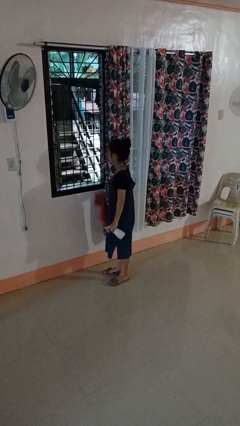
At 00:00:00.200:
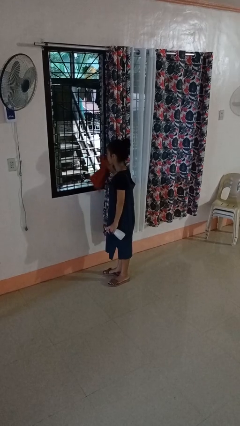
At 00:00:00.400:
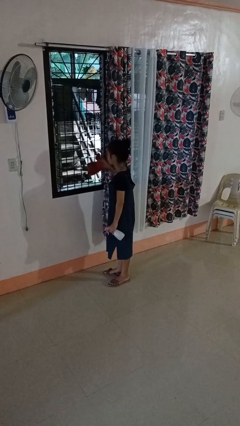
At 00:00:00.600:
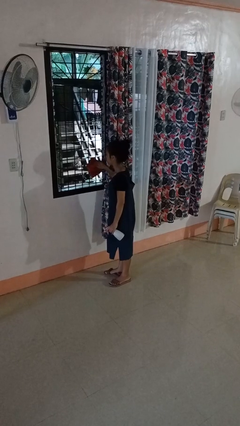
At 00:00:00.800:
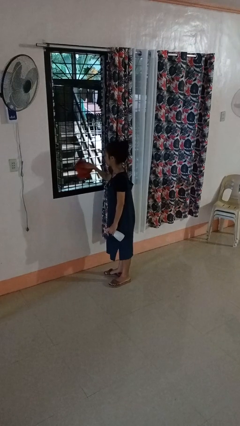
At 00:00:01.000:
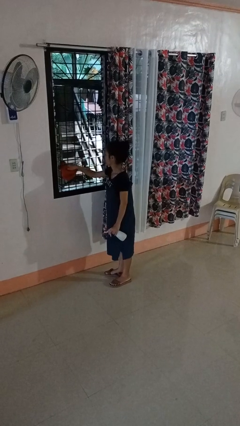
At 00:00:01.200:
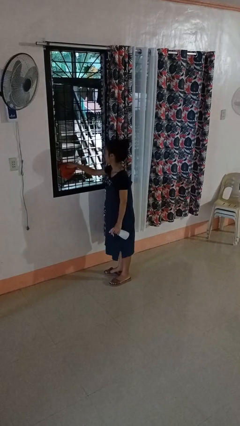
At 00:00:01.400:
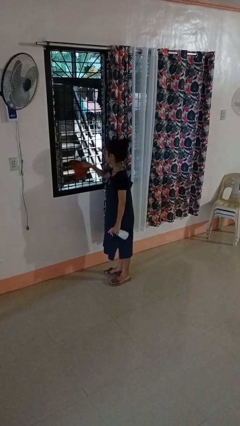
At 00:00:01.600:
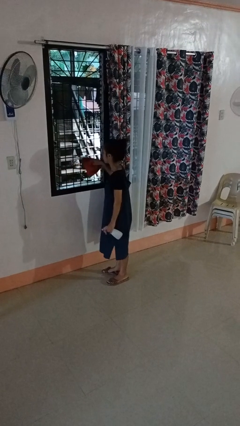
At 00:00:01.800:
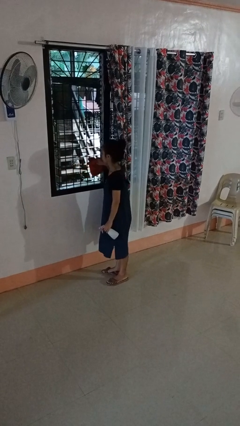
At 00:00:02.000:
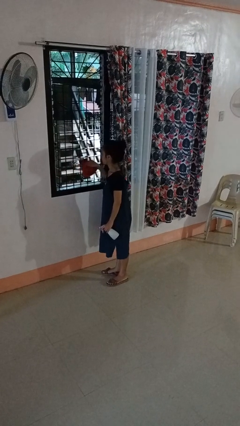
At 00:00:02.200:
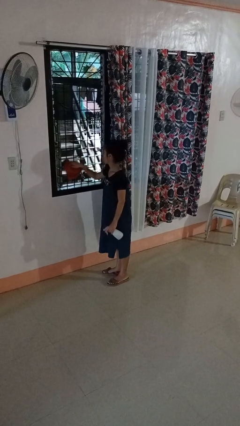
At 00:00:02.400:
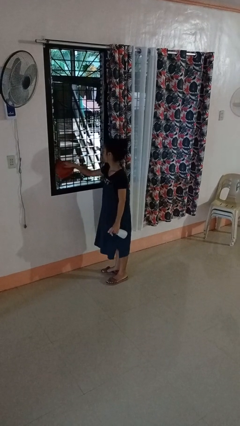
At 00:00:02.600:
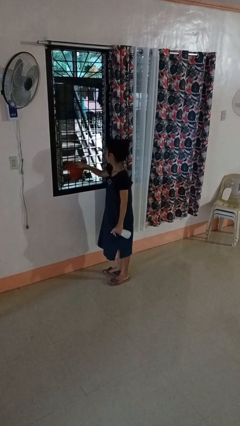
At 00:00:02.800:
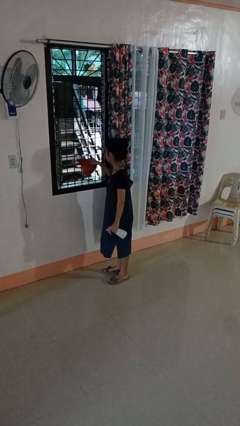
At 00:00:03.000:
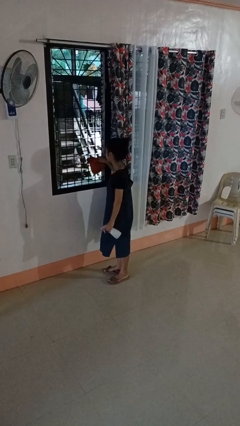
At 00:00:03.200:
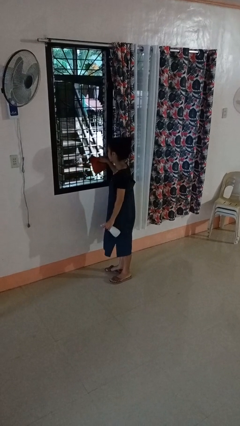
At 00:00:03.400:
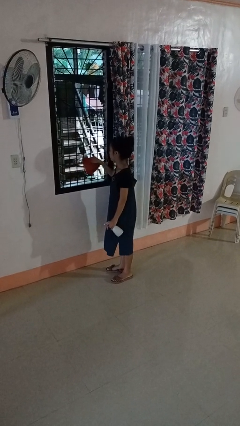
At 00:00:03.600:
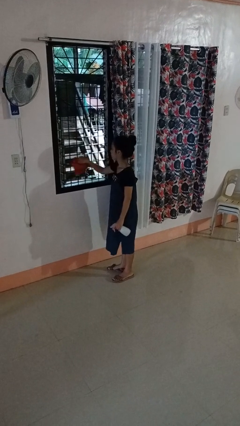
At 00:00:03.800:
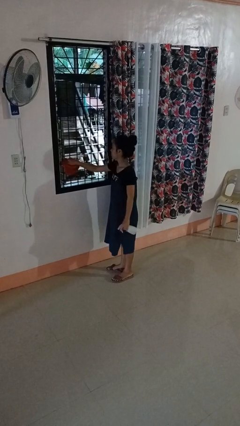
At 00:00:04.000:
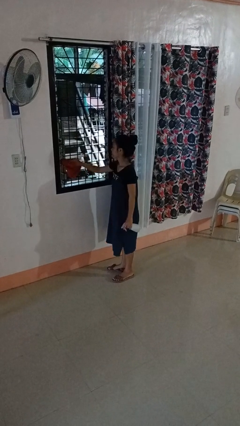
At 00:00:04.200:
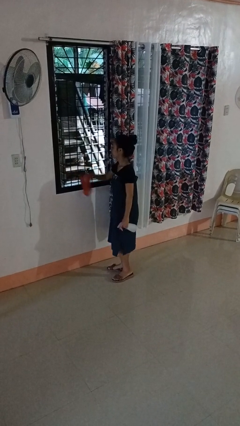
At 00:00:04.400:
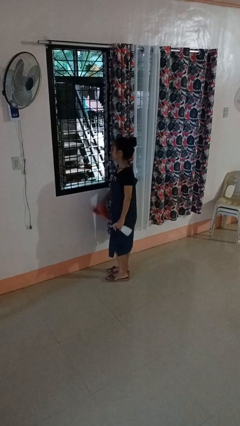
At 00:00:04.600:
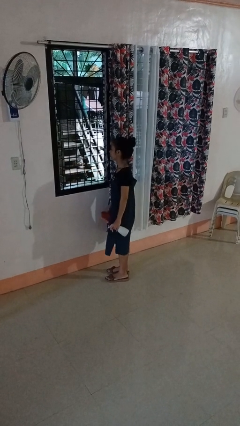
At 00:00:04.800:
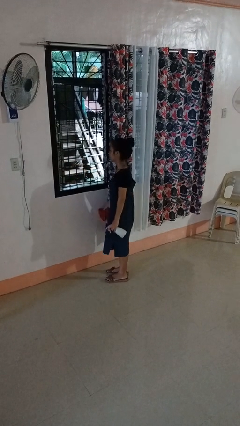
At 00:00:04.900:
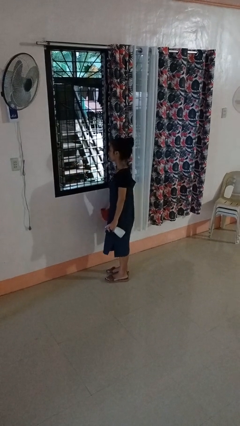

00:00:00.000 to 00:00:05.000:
person washes window

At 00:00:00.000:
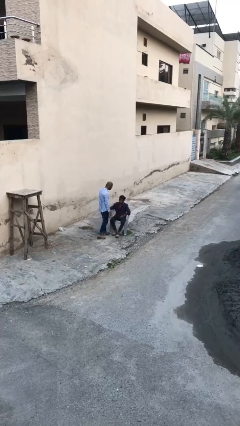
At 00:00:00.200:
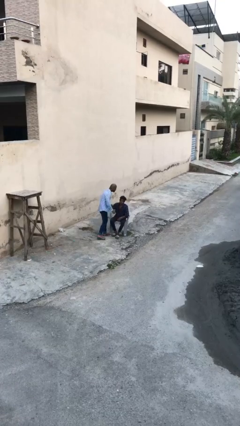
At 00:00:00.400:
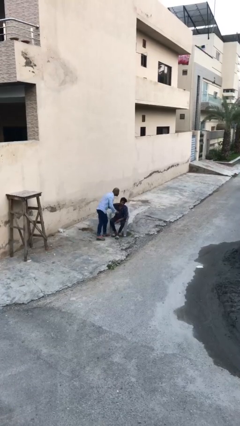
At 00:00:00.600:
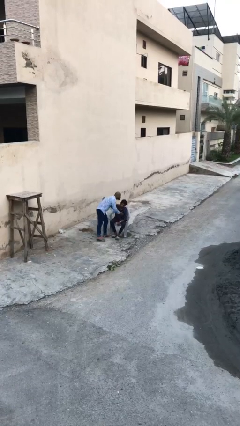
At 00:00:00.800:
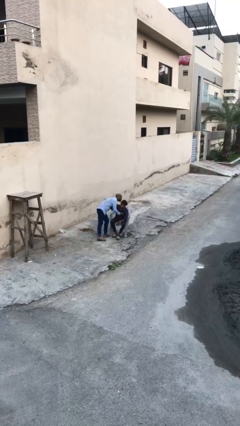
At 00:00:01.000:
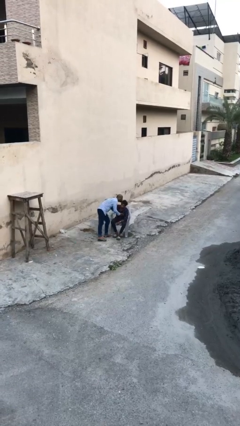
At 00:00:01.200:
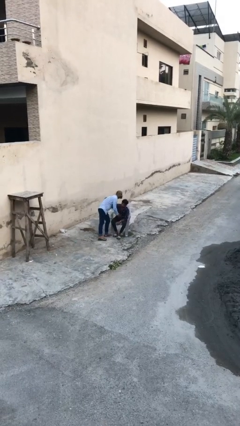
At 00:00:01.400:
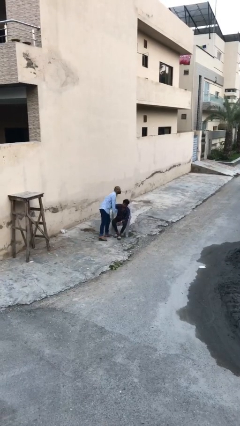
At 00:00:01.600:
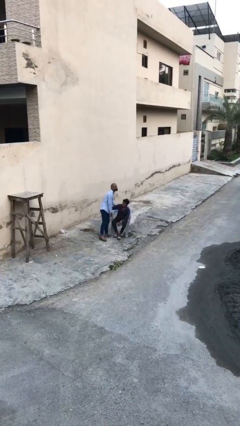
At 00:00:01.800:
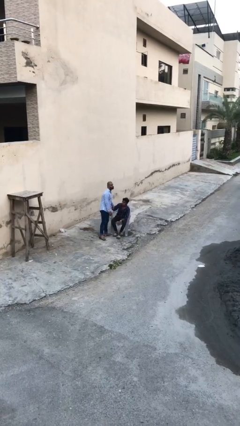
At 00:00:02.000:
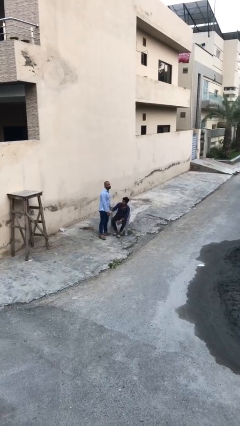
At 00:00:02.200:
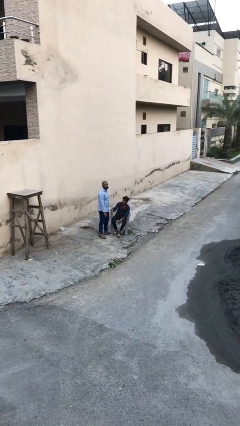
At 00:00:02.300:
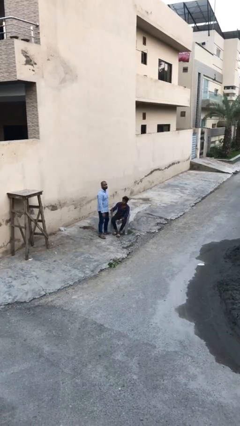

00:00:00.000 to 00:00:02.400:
person embraces person

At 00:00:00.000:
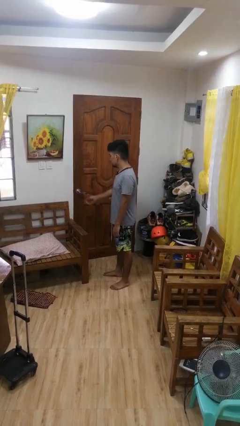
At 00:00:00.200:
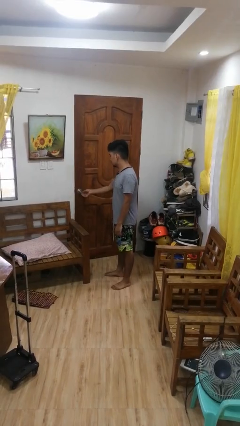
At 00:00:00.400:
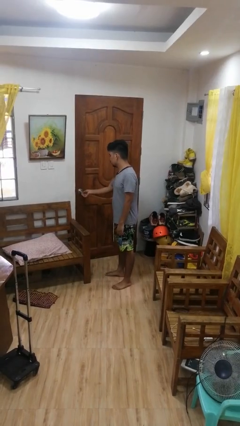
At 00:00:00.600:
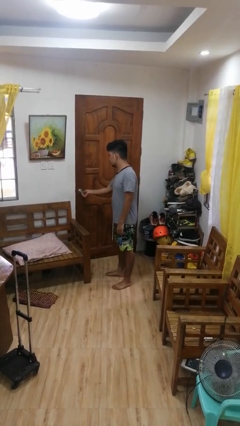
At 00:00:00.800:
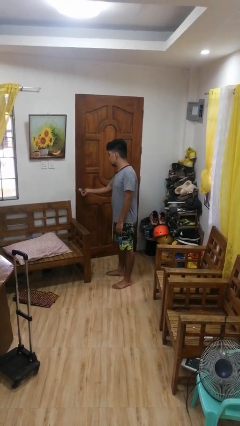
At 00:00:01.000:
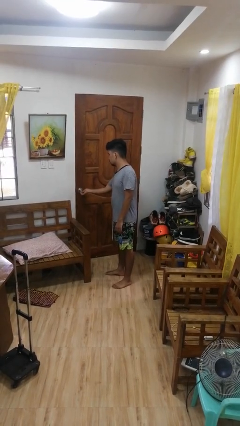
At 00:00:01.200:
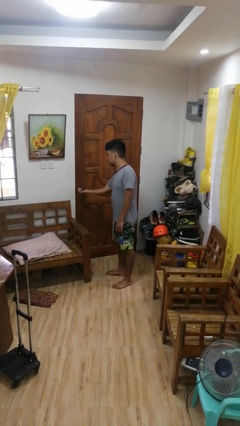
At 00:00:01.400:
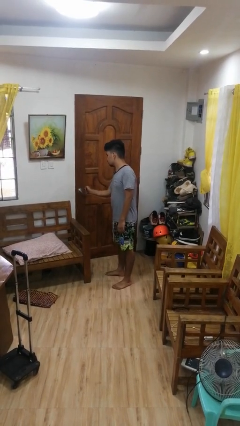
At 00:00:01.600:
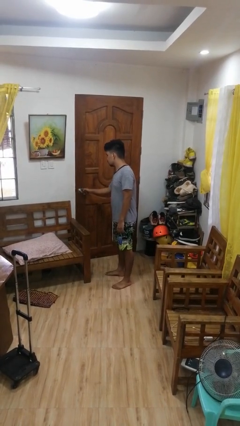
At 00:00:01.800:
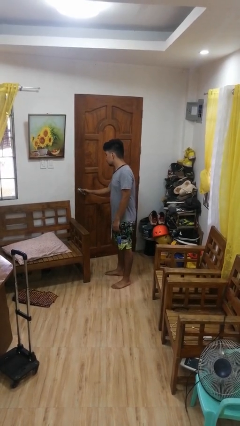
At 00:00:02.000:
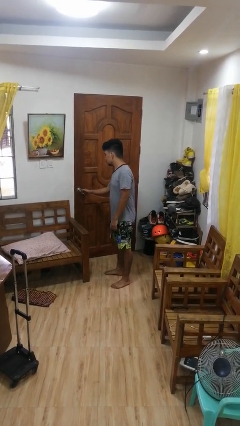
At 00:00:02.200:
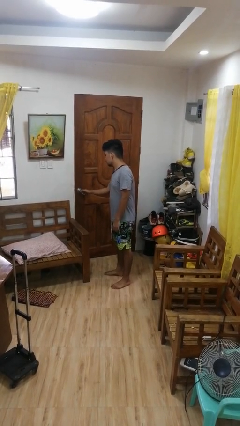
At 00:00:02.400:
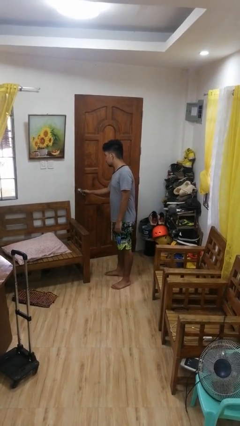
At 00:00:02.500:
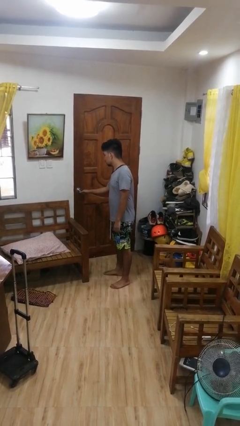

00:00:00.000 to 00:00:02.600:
person unlocks door with keys

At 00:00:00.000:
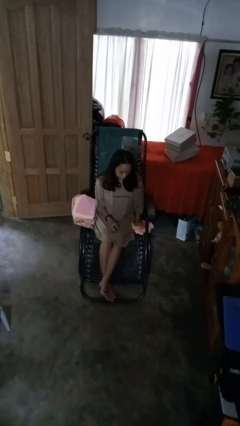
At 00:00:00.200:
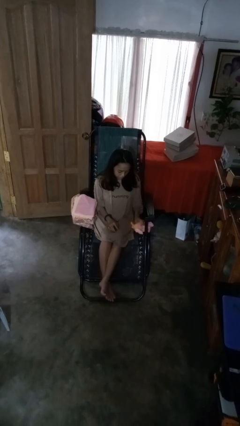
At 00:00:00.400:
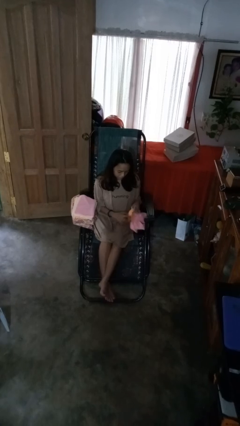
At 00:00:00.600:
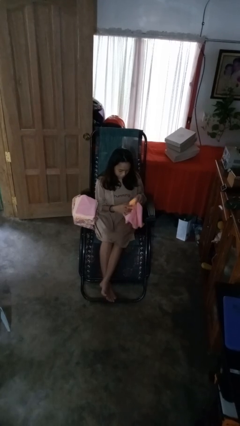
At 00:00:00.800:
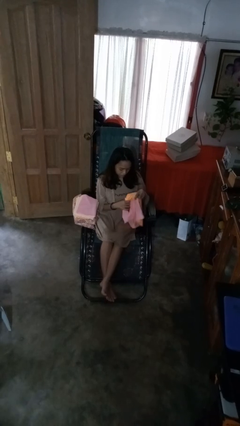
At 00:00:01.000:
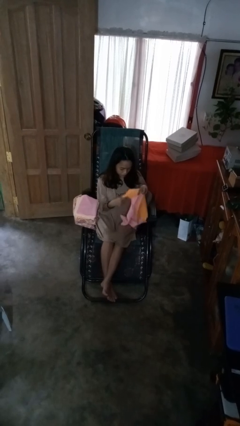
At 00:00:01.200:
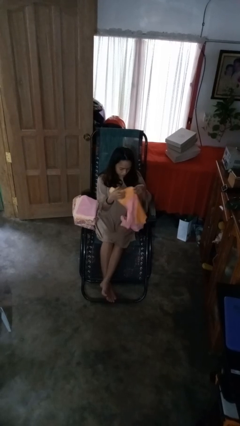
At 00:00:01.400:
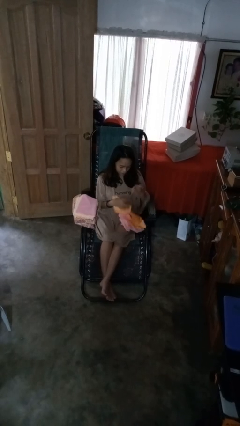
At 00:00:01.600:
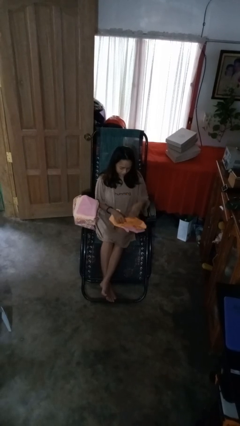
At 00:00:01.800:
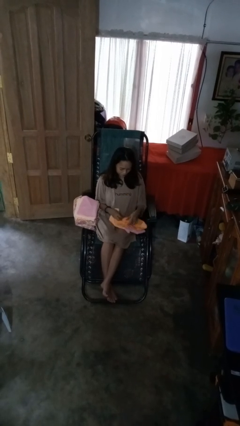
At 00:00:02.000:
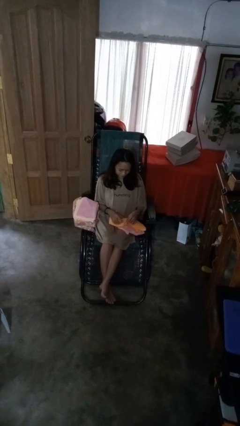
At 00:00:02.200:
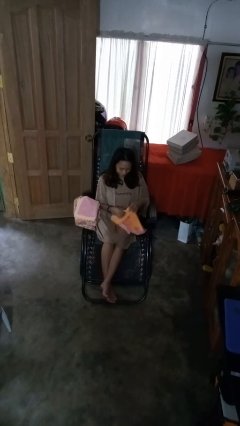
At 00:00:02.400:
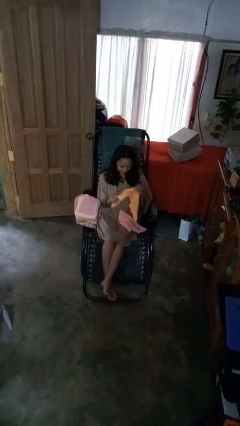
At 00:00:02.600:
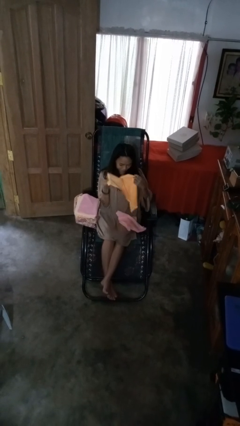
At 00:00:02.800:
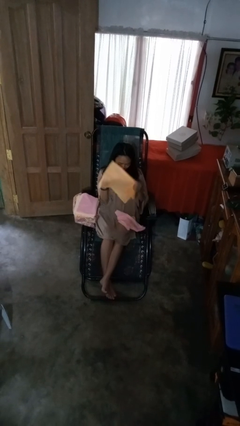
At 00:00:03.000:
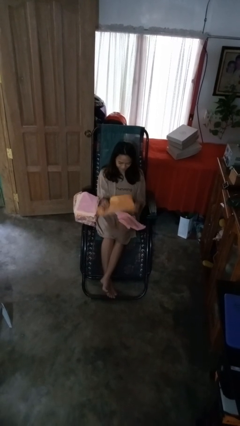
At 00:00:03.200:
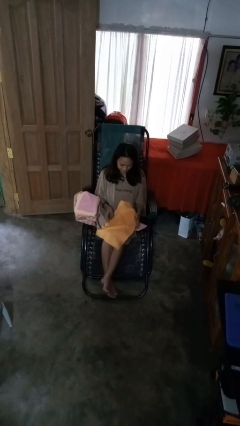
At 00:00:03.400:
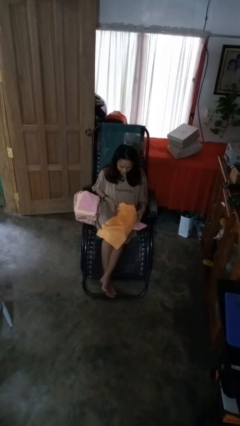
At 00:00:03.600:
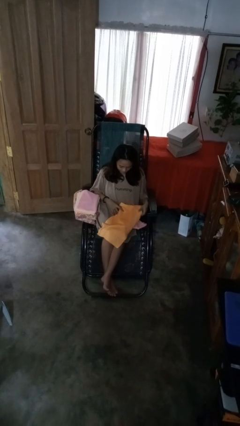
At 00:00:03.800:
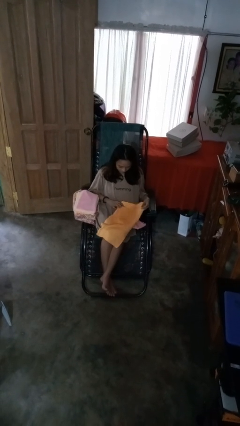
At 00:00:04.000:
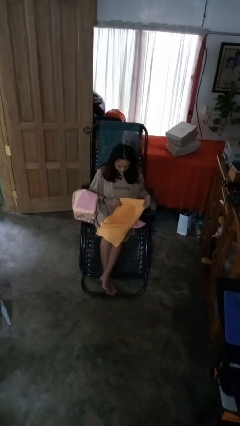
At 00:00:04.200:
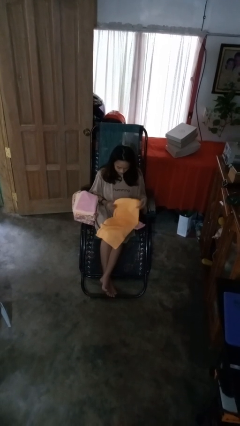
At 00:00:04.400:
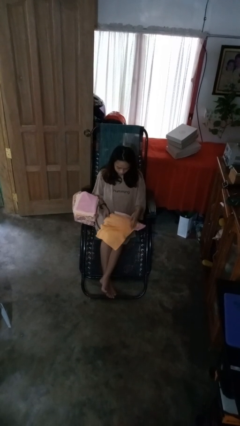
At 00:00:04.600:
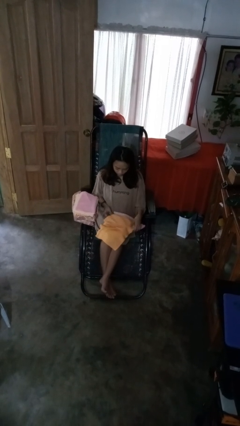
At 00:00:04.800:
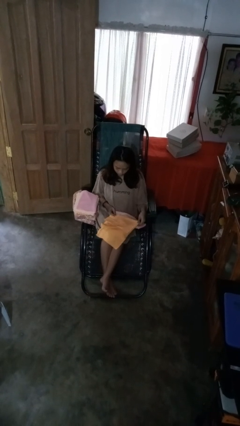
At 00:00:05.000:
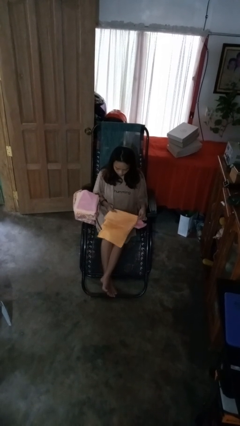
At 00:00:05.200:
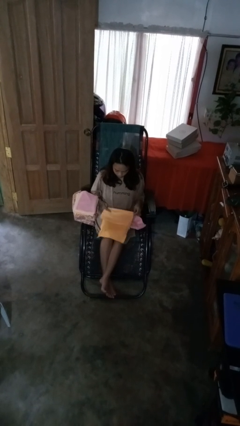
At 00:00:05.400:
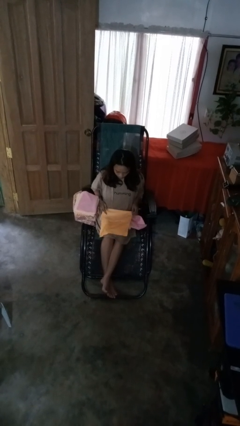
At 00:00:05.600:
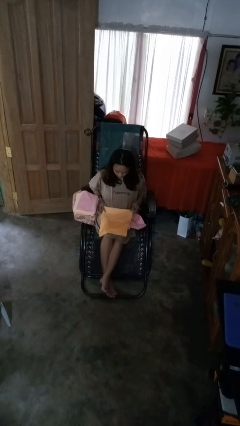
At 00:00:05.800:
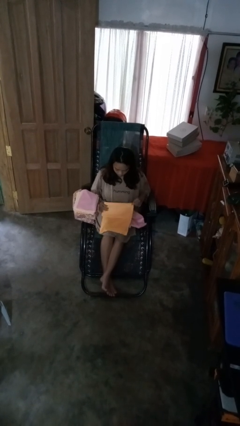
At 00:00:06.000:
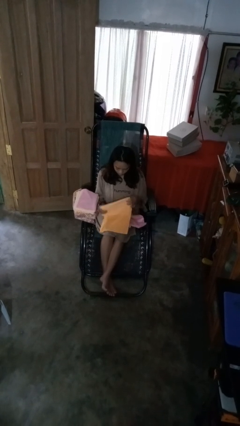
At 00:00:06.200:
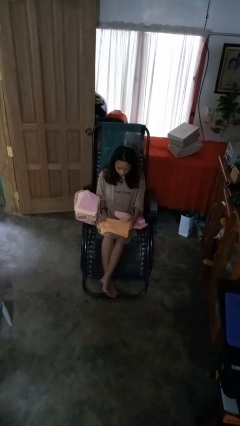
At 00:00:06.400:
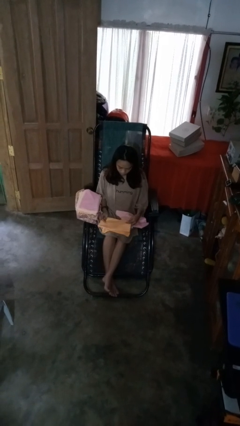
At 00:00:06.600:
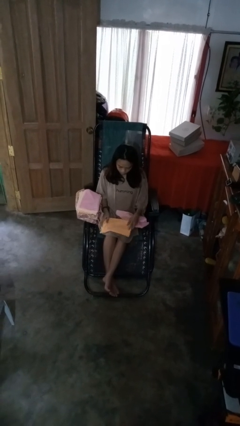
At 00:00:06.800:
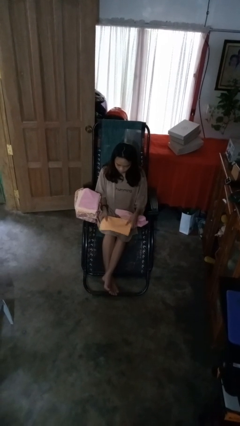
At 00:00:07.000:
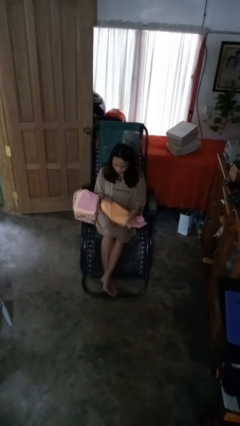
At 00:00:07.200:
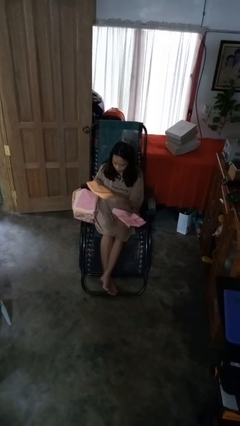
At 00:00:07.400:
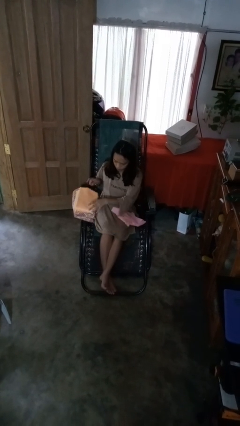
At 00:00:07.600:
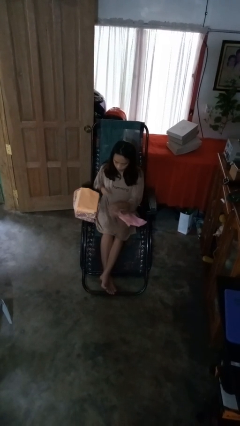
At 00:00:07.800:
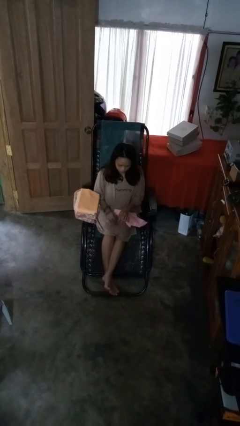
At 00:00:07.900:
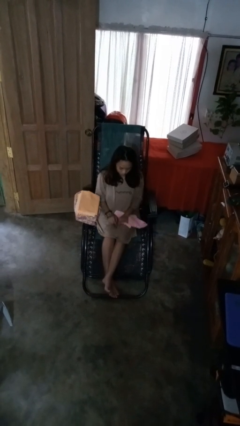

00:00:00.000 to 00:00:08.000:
person folds towel
